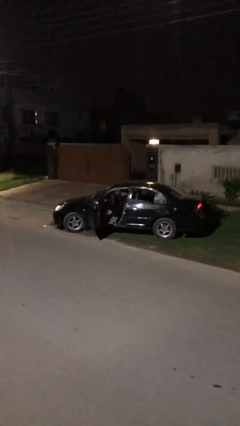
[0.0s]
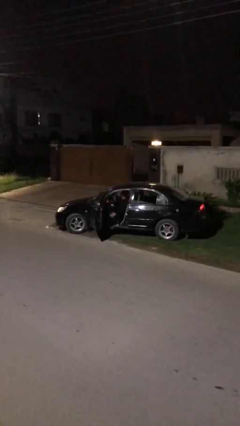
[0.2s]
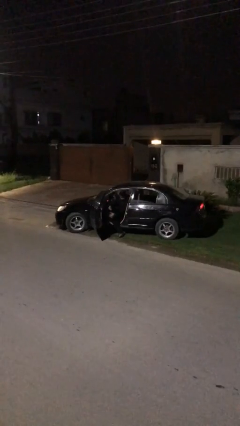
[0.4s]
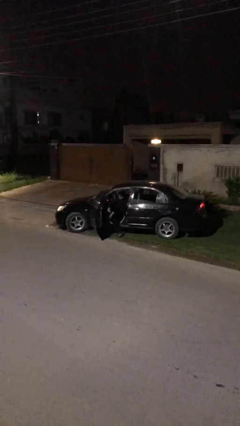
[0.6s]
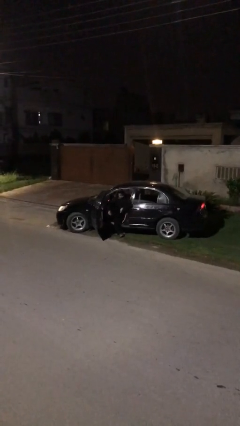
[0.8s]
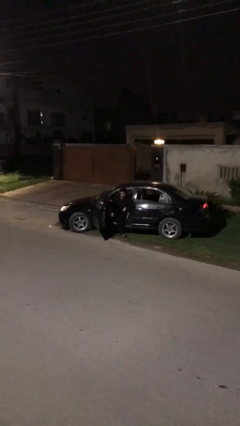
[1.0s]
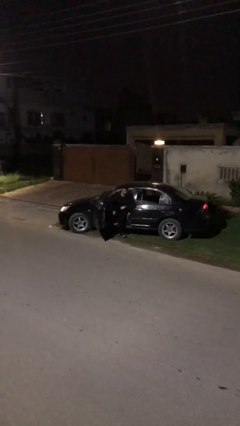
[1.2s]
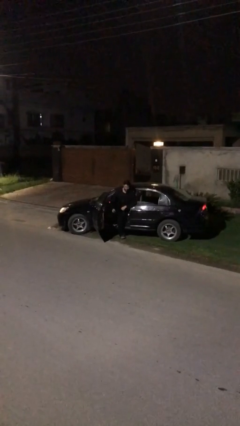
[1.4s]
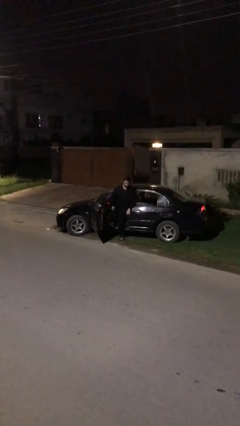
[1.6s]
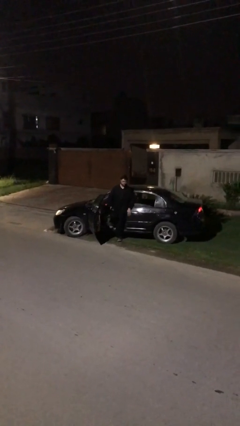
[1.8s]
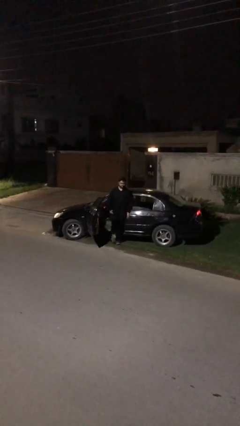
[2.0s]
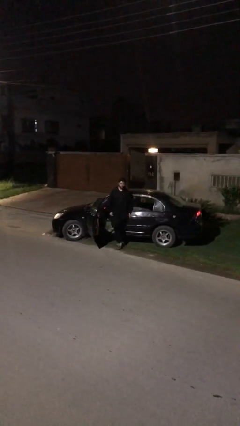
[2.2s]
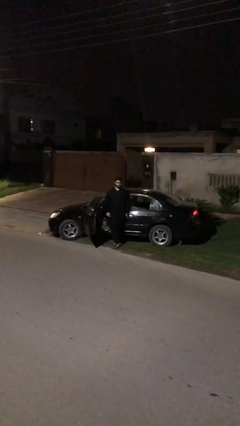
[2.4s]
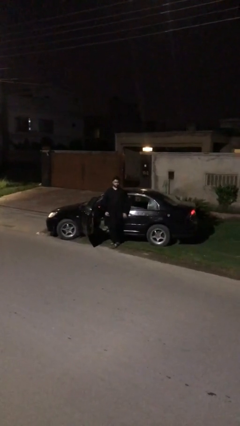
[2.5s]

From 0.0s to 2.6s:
person exits car

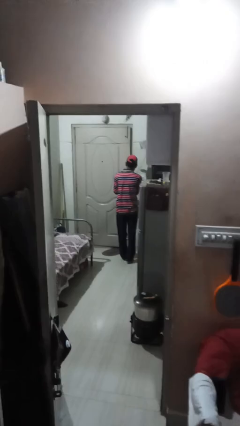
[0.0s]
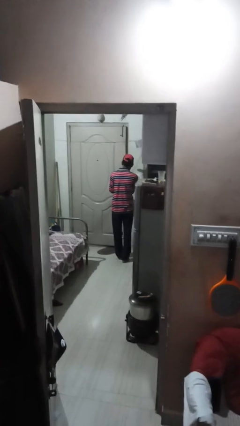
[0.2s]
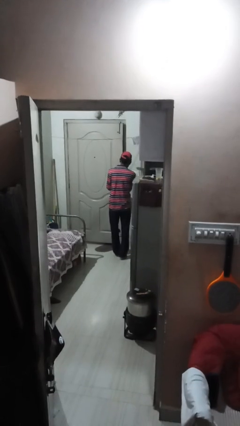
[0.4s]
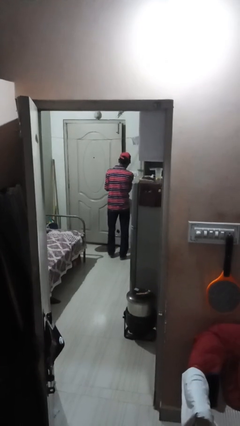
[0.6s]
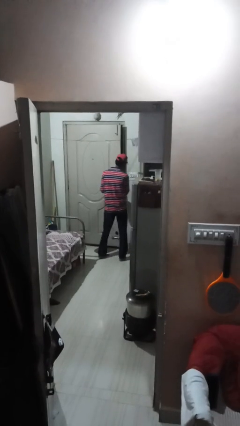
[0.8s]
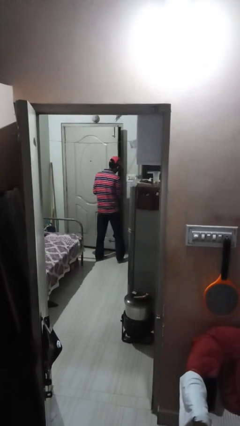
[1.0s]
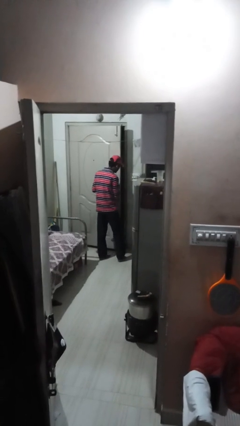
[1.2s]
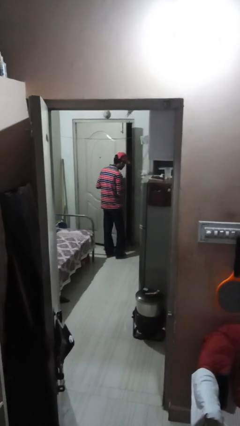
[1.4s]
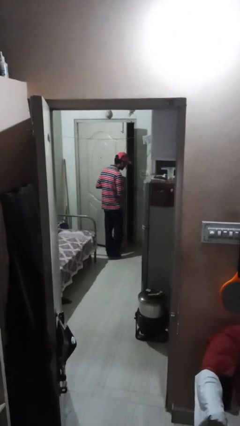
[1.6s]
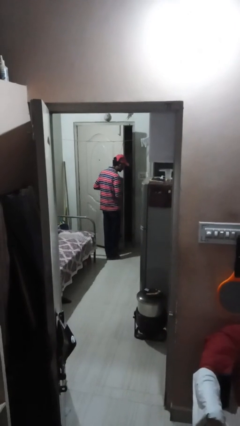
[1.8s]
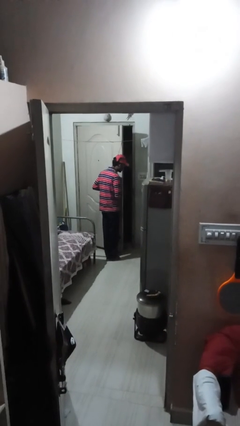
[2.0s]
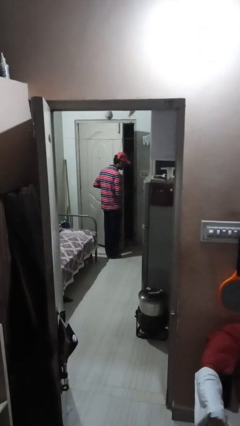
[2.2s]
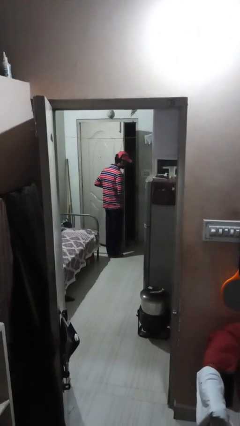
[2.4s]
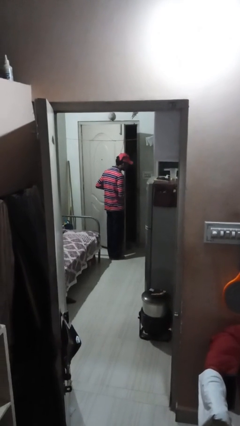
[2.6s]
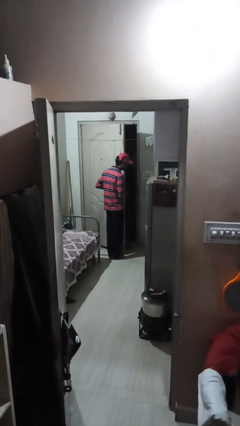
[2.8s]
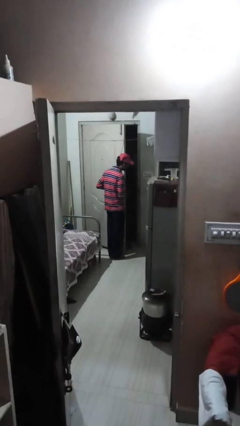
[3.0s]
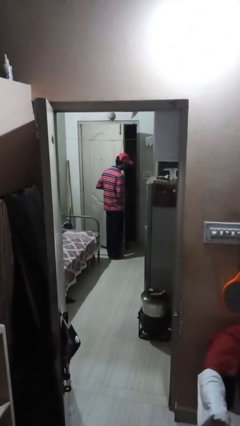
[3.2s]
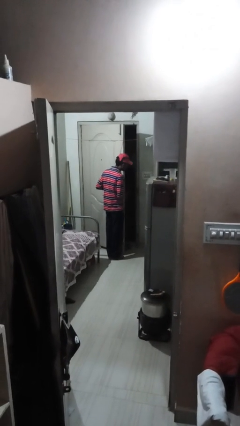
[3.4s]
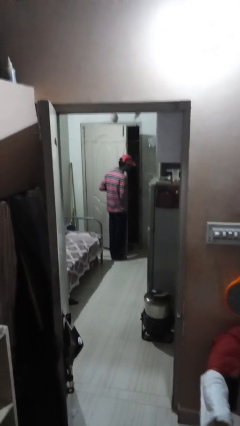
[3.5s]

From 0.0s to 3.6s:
person opens facility door

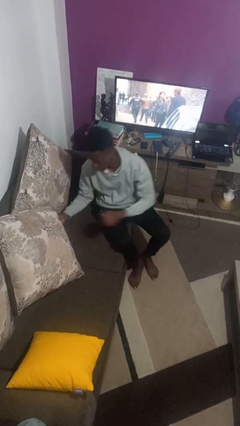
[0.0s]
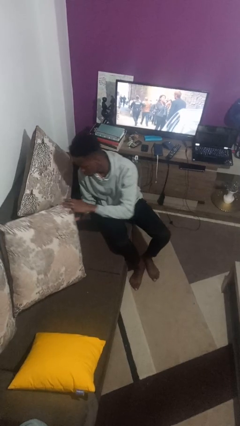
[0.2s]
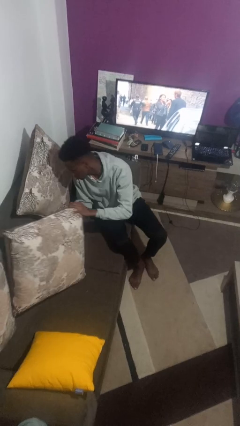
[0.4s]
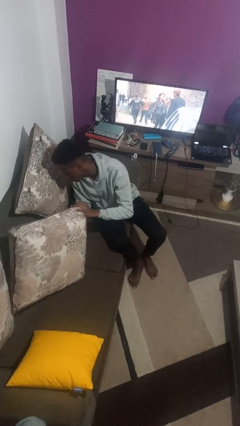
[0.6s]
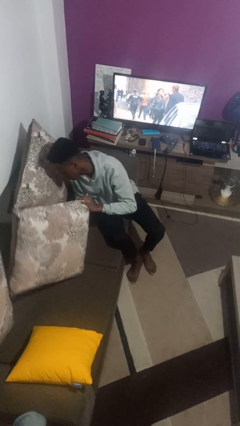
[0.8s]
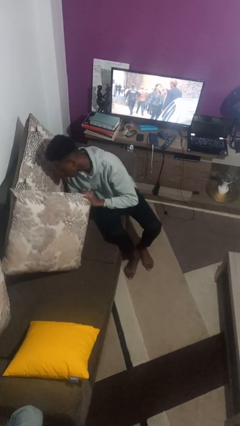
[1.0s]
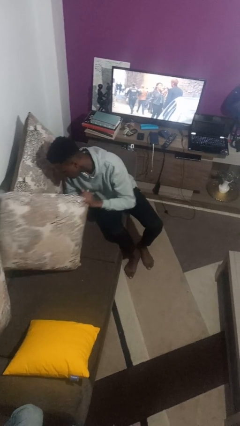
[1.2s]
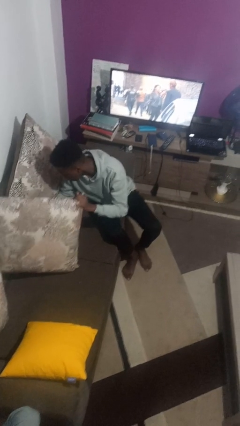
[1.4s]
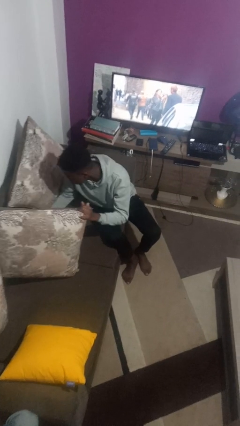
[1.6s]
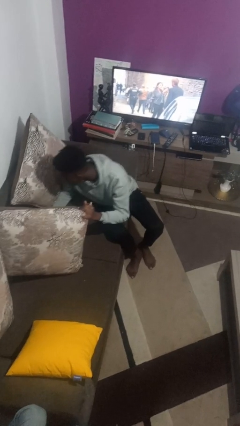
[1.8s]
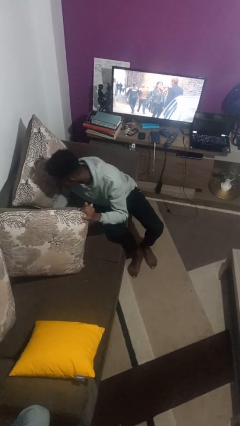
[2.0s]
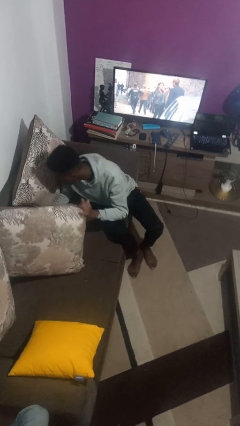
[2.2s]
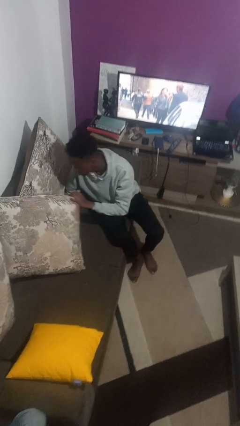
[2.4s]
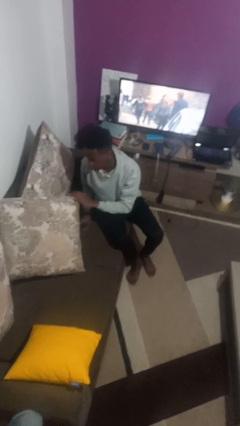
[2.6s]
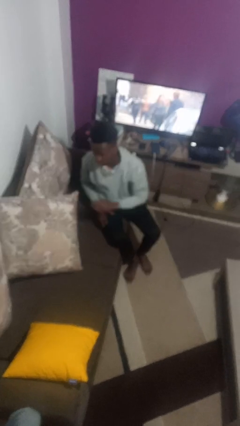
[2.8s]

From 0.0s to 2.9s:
person searches in couch

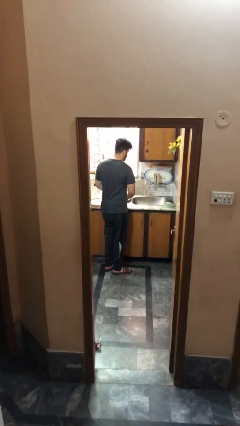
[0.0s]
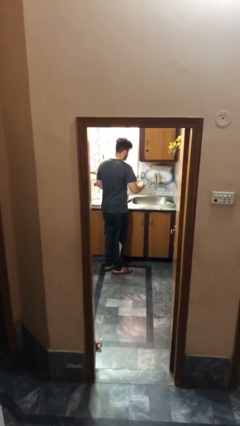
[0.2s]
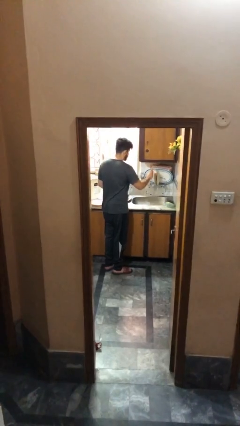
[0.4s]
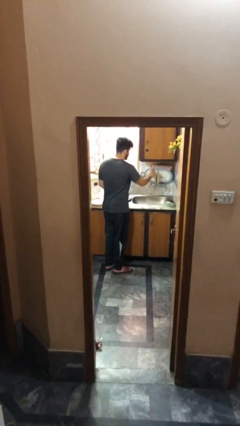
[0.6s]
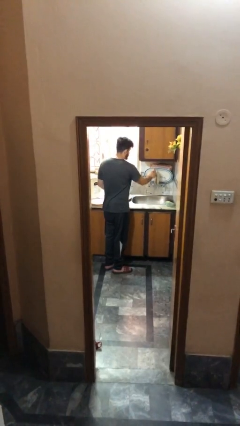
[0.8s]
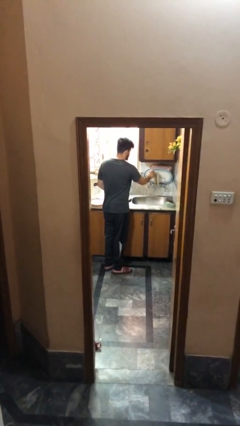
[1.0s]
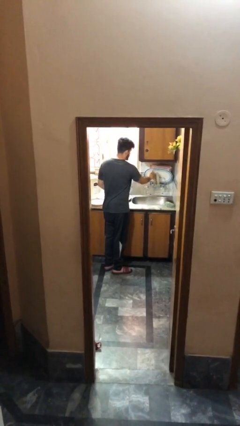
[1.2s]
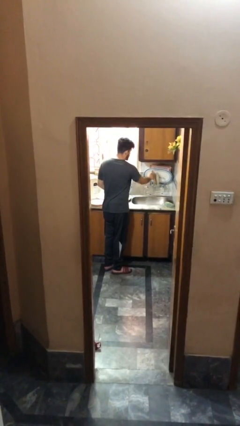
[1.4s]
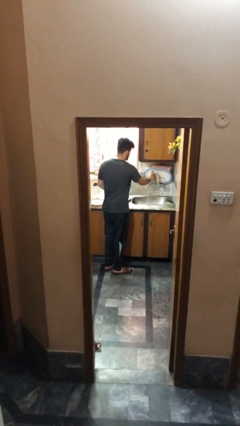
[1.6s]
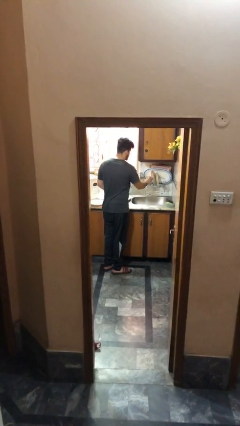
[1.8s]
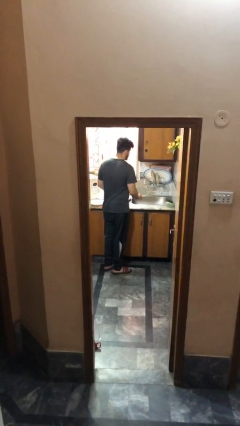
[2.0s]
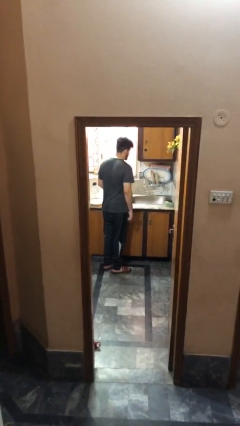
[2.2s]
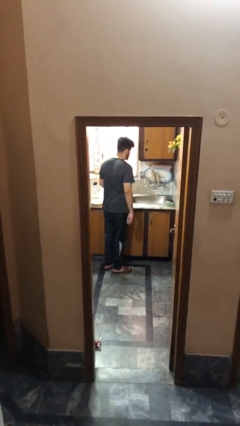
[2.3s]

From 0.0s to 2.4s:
person loads dishwasher

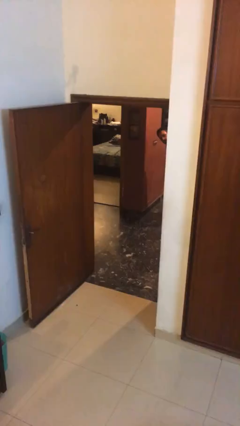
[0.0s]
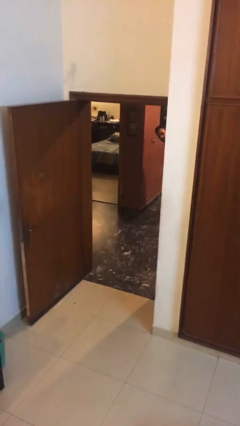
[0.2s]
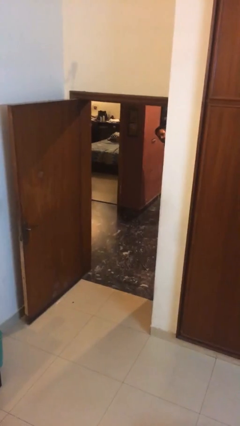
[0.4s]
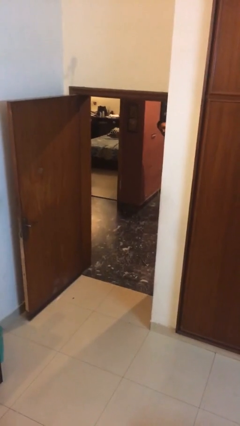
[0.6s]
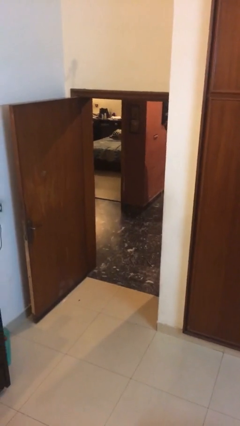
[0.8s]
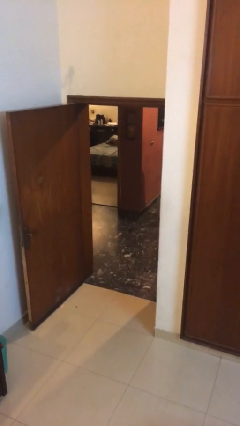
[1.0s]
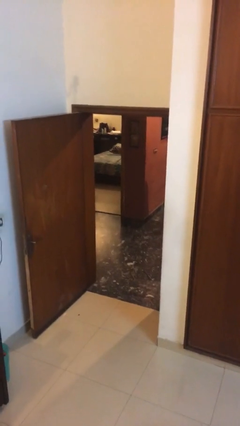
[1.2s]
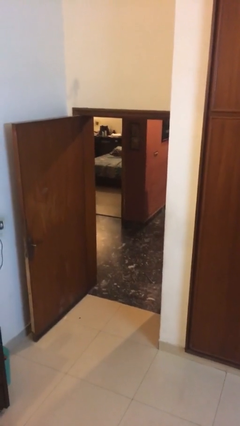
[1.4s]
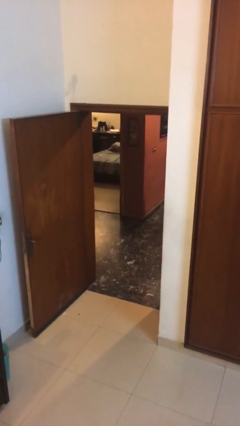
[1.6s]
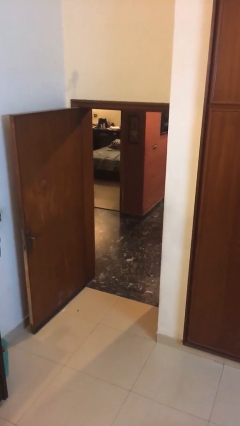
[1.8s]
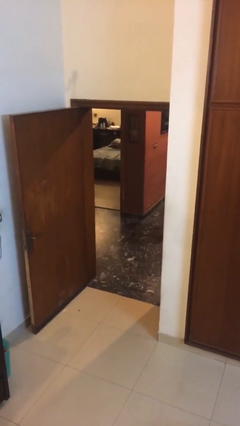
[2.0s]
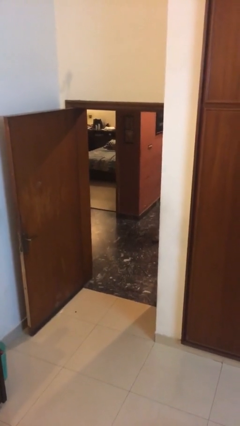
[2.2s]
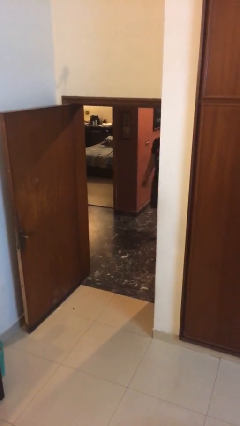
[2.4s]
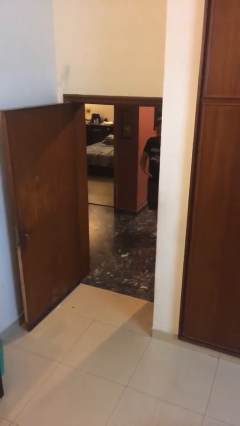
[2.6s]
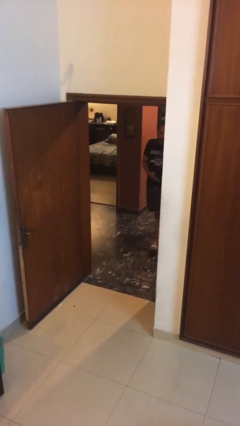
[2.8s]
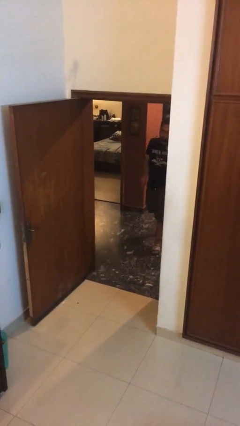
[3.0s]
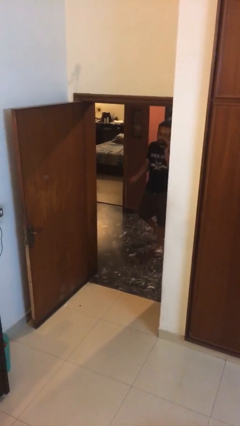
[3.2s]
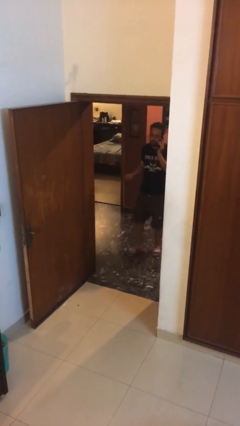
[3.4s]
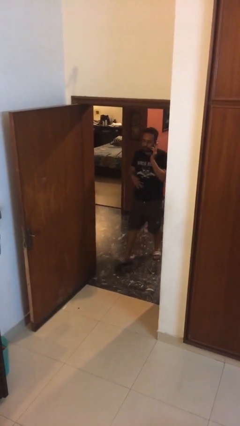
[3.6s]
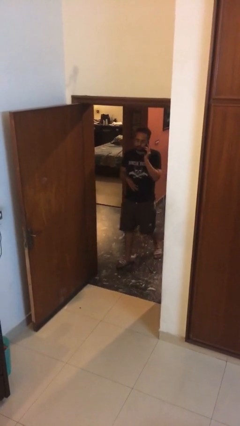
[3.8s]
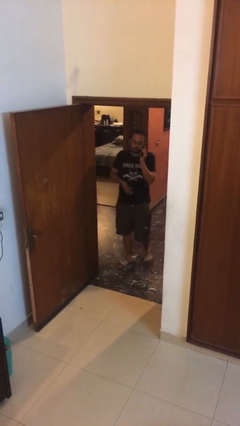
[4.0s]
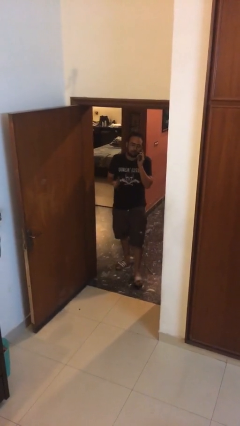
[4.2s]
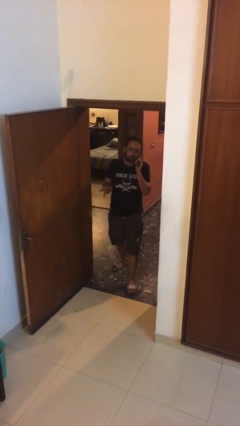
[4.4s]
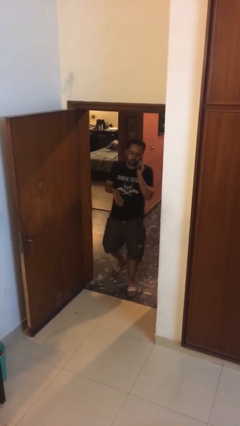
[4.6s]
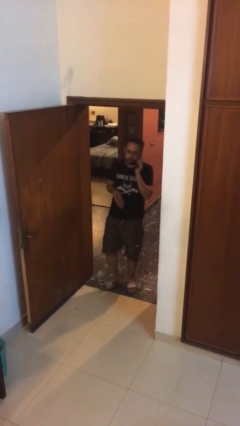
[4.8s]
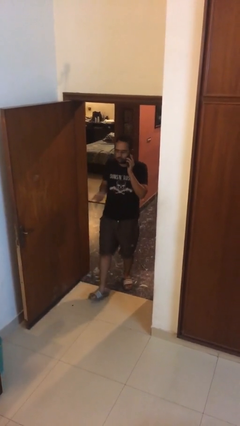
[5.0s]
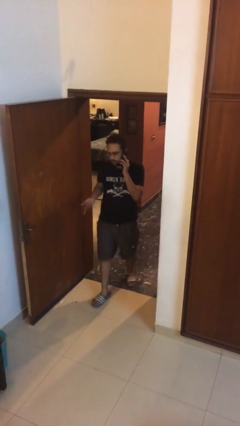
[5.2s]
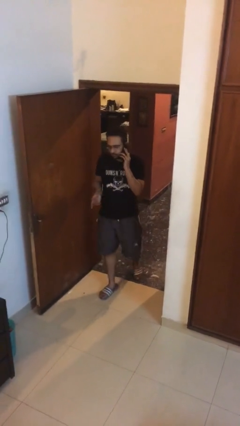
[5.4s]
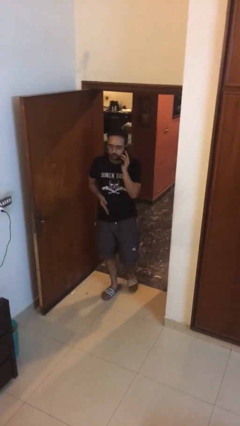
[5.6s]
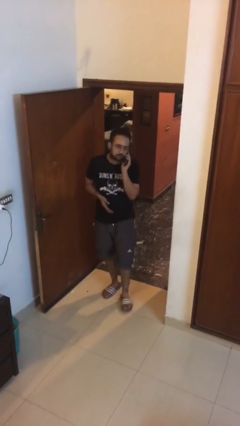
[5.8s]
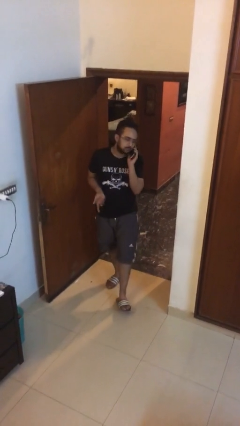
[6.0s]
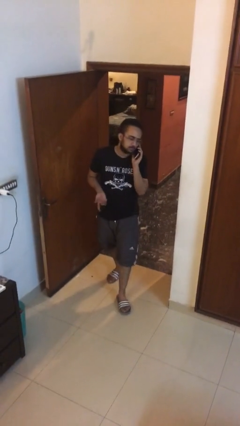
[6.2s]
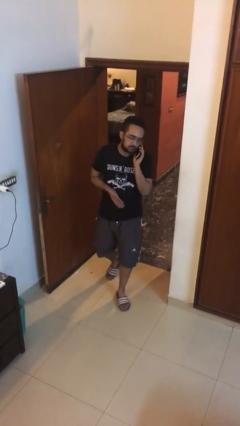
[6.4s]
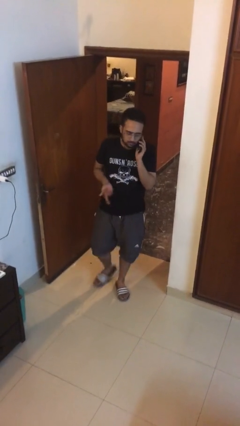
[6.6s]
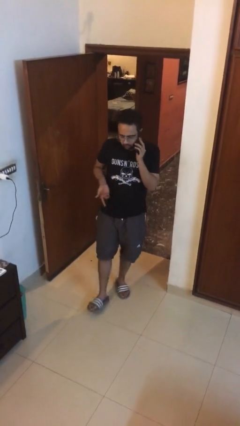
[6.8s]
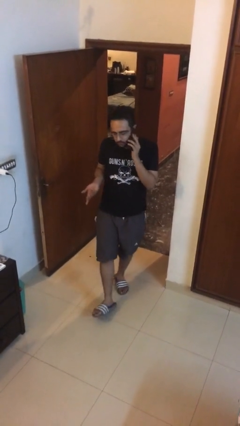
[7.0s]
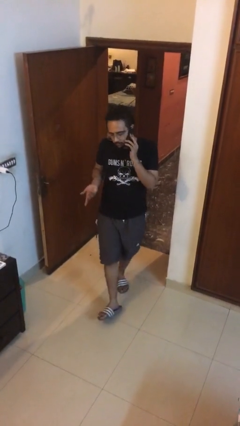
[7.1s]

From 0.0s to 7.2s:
person enters scene through structure
